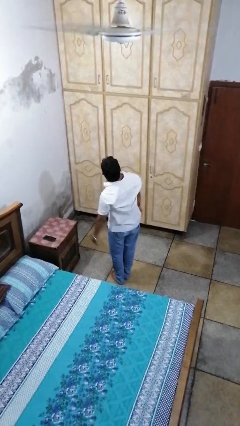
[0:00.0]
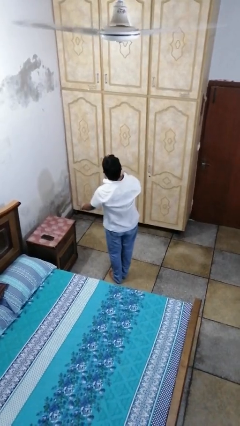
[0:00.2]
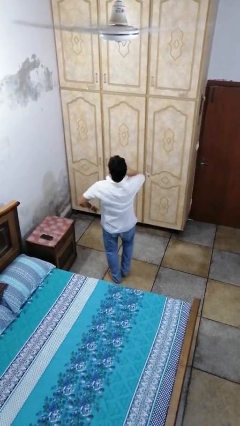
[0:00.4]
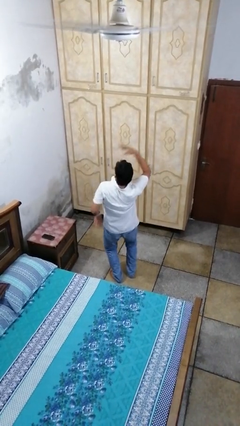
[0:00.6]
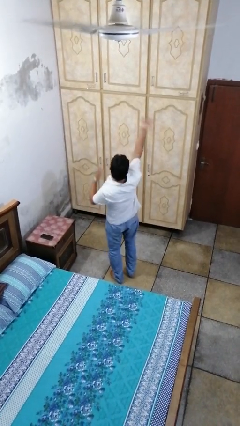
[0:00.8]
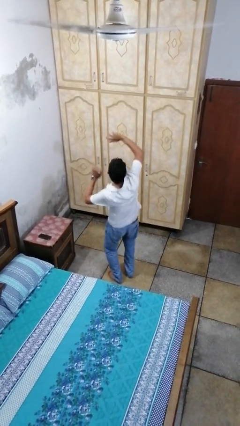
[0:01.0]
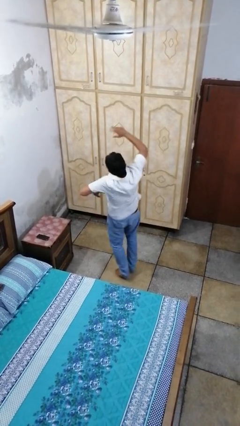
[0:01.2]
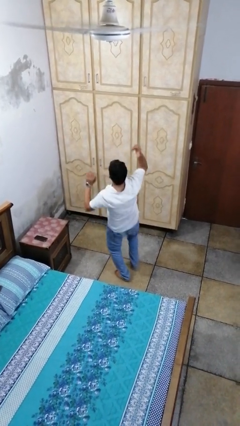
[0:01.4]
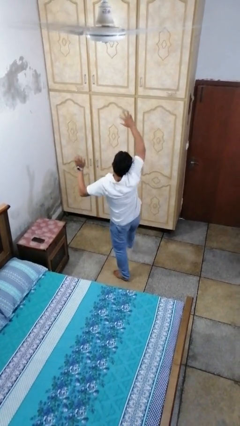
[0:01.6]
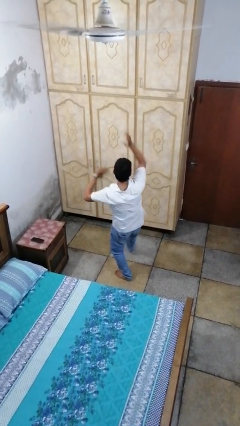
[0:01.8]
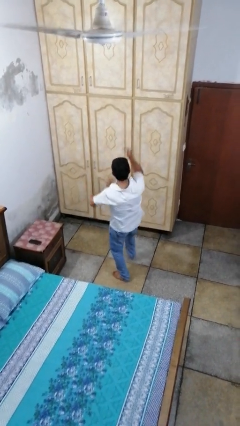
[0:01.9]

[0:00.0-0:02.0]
person dances in place

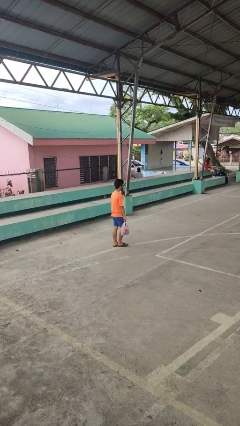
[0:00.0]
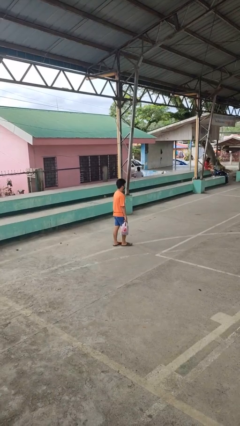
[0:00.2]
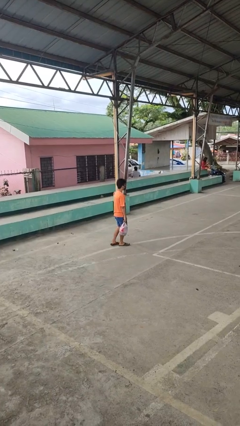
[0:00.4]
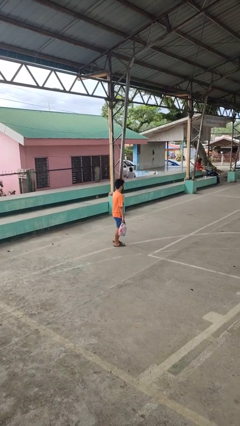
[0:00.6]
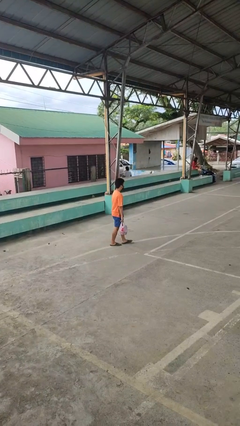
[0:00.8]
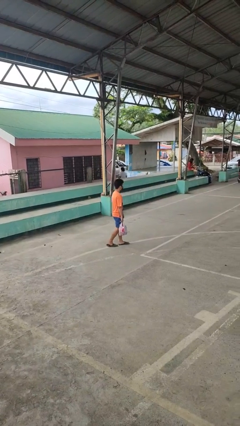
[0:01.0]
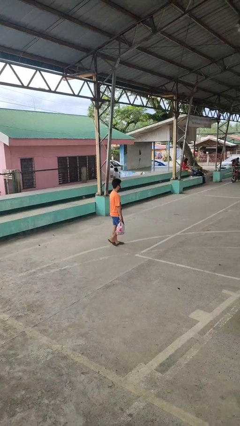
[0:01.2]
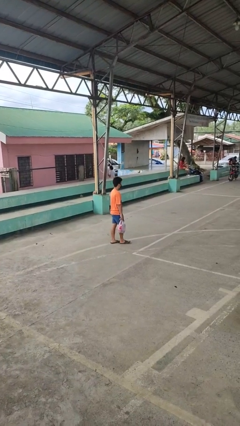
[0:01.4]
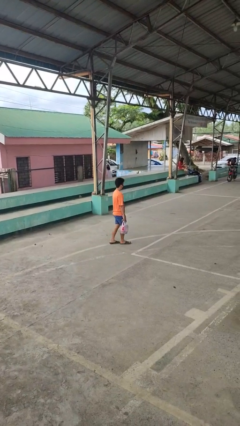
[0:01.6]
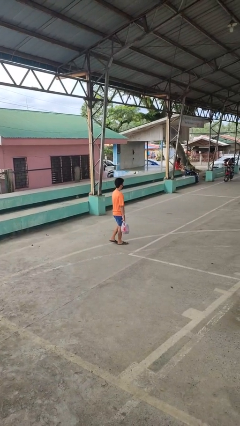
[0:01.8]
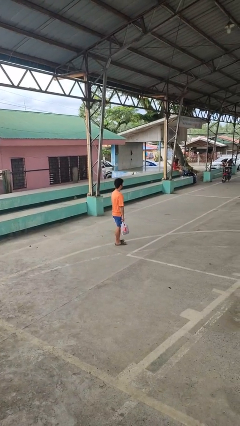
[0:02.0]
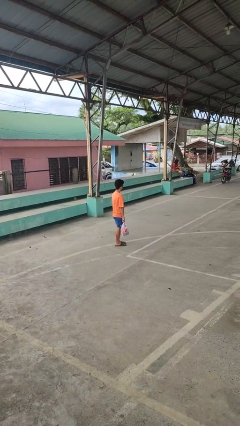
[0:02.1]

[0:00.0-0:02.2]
person carries groceries

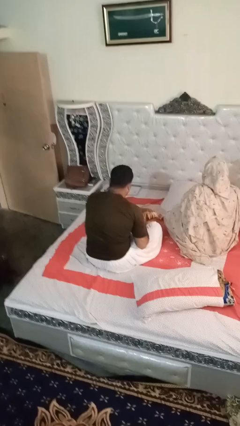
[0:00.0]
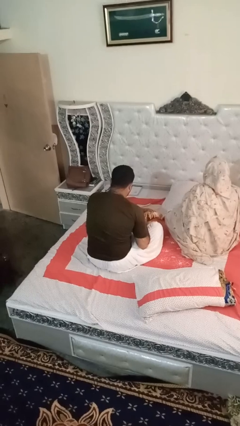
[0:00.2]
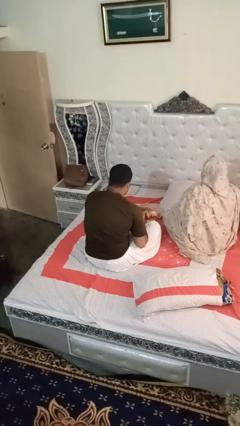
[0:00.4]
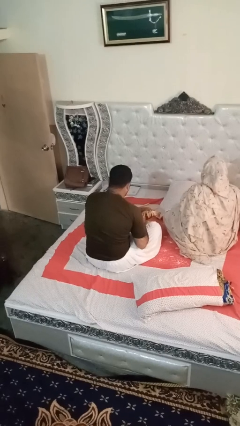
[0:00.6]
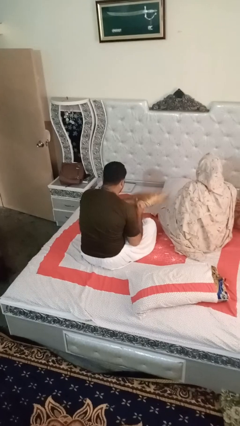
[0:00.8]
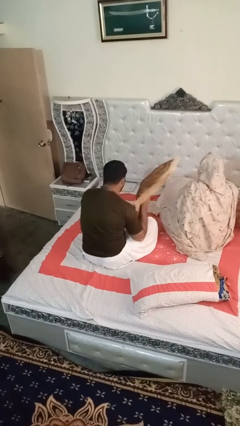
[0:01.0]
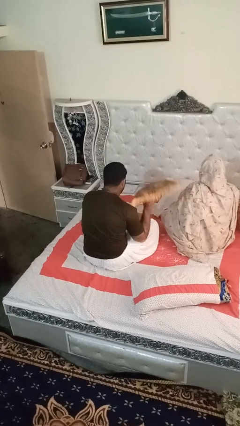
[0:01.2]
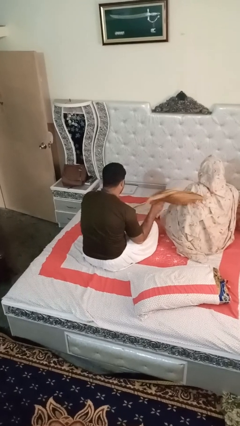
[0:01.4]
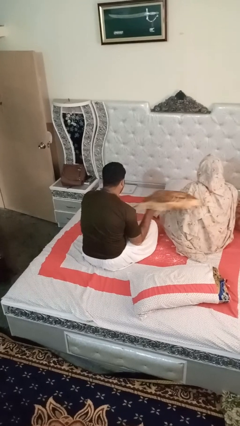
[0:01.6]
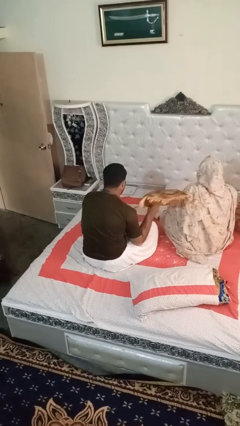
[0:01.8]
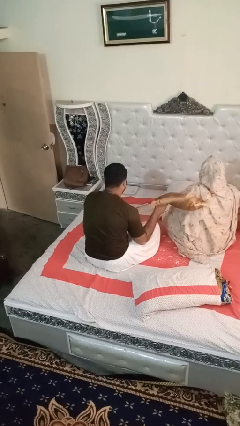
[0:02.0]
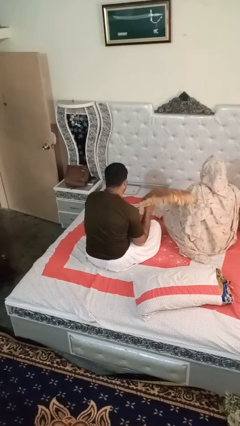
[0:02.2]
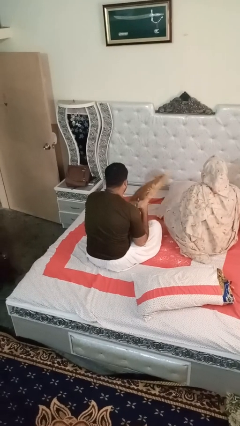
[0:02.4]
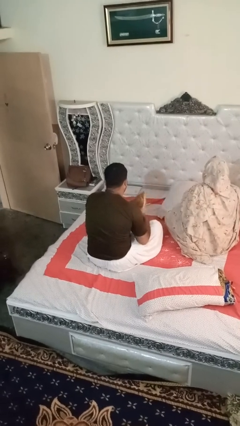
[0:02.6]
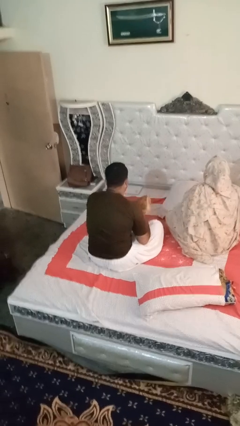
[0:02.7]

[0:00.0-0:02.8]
person hits person with pillow

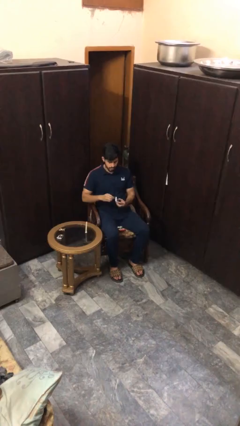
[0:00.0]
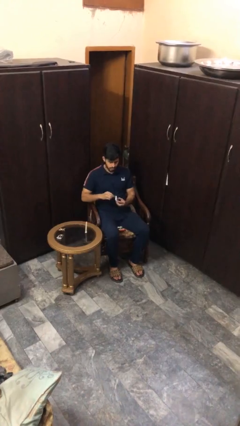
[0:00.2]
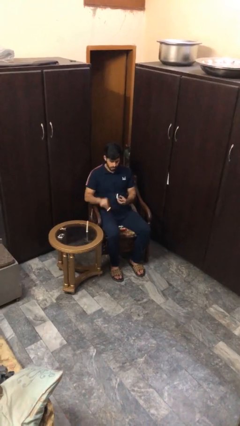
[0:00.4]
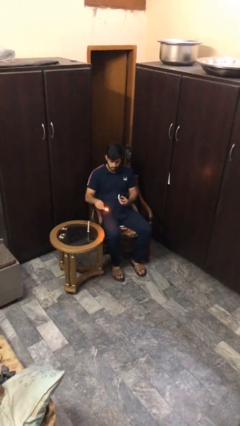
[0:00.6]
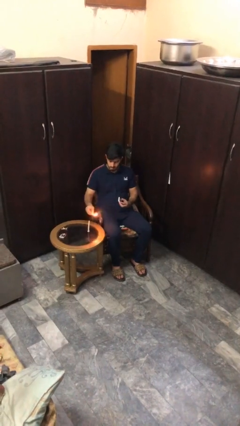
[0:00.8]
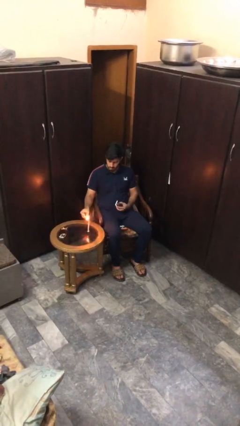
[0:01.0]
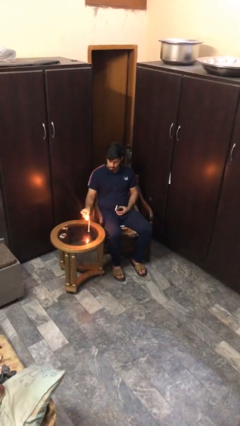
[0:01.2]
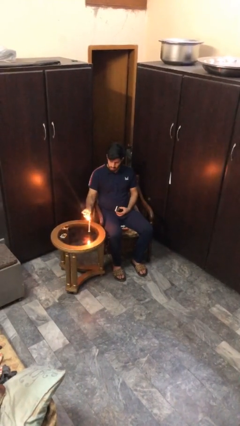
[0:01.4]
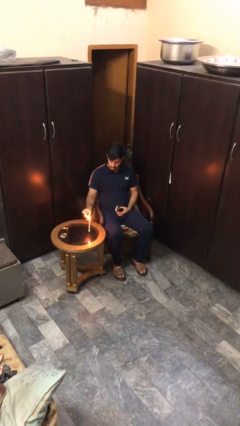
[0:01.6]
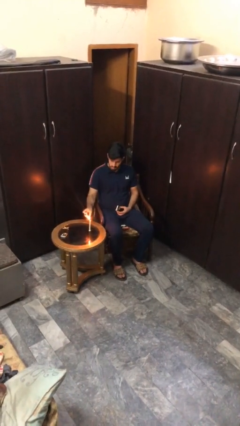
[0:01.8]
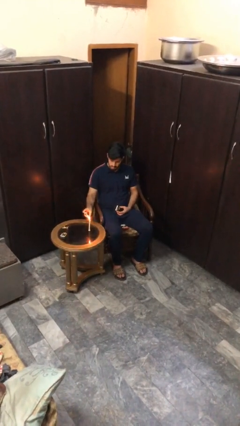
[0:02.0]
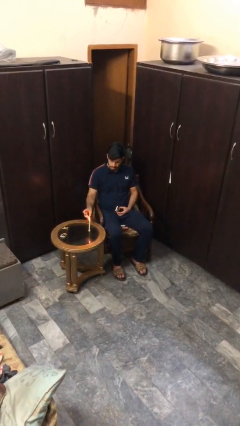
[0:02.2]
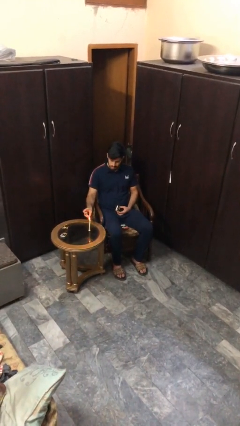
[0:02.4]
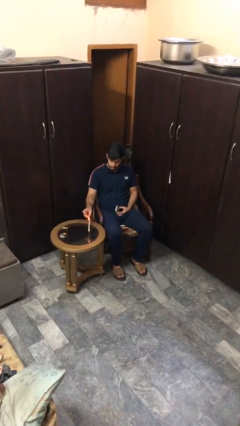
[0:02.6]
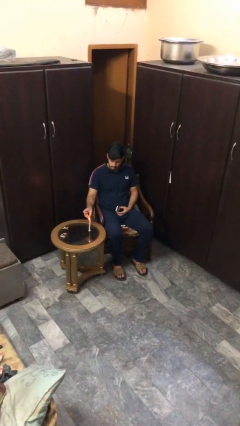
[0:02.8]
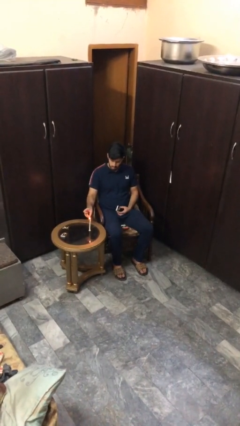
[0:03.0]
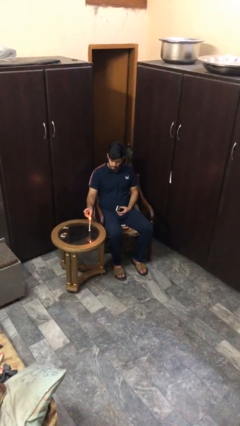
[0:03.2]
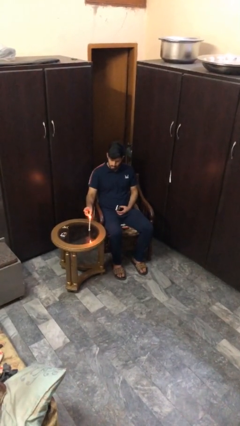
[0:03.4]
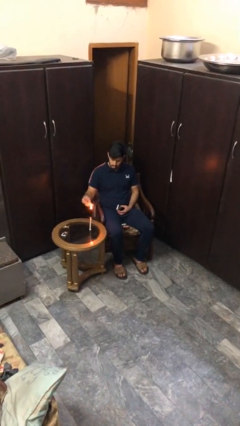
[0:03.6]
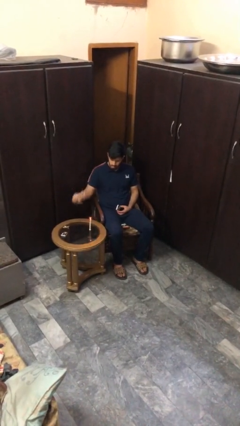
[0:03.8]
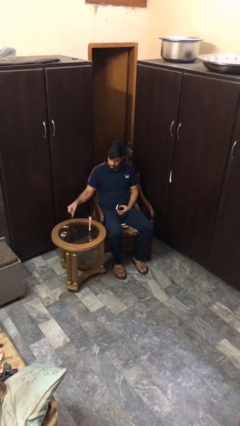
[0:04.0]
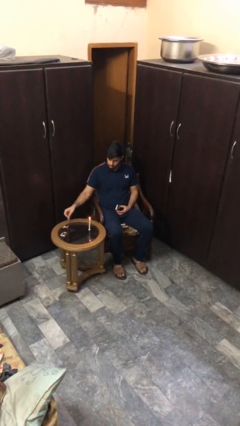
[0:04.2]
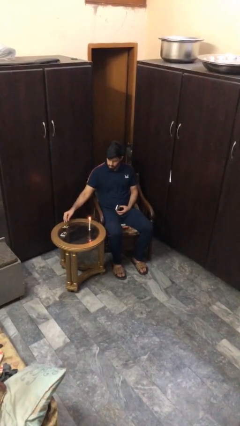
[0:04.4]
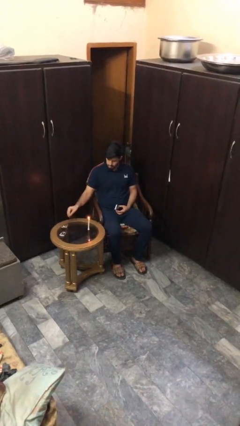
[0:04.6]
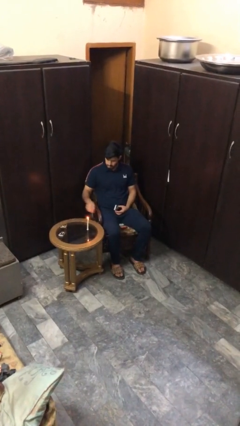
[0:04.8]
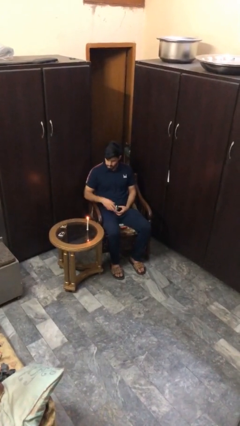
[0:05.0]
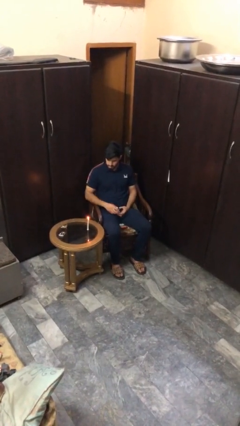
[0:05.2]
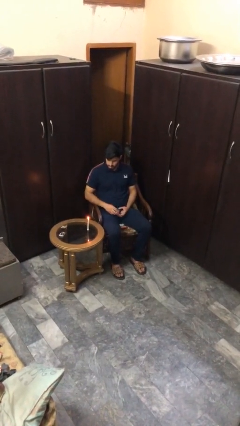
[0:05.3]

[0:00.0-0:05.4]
person lights candle

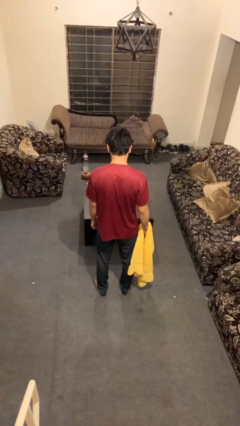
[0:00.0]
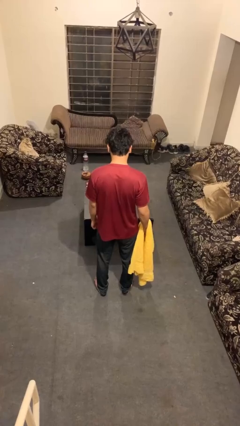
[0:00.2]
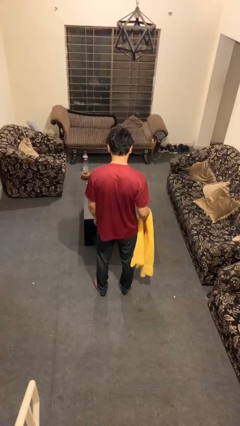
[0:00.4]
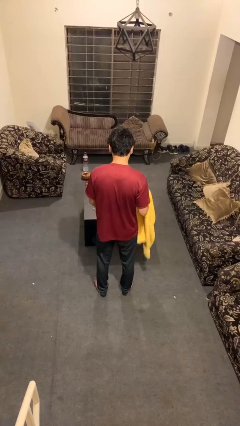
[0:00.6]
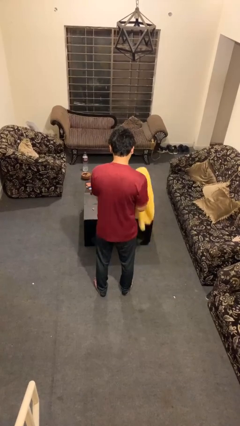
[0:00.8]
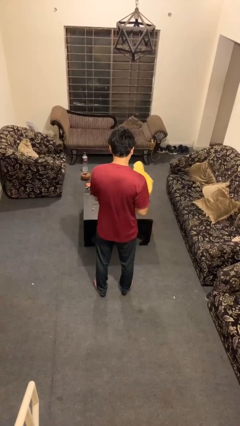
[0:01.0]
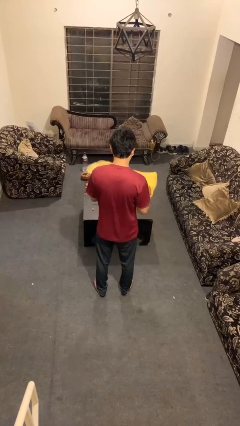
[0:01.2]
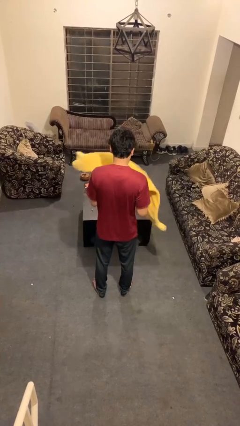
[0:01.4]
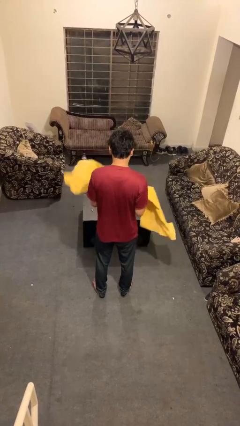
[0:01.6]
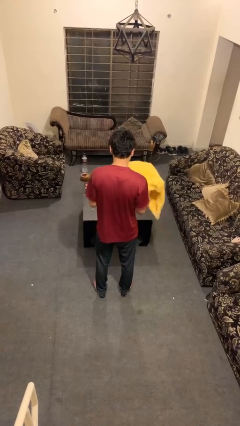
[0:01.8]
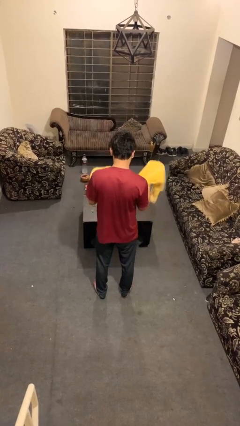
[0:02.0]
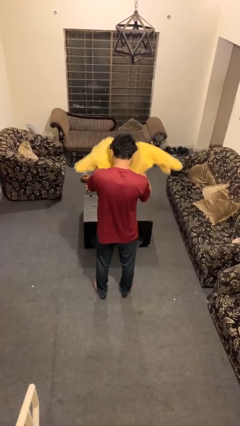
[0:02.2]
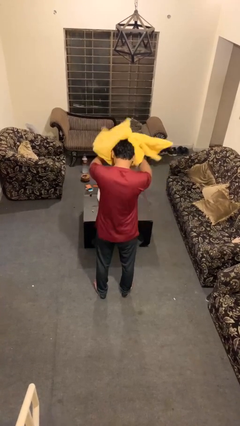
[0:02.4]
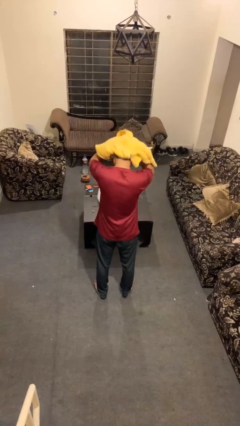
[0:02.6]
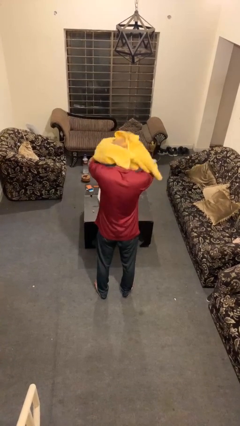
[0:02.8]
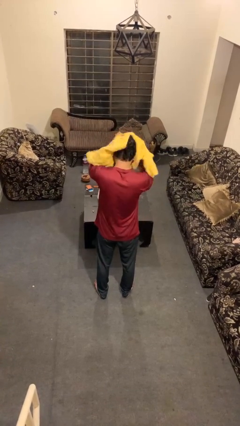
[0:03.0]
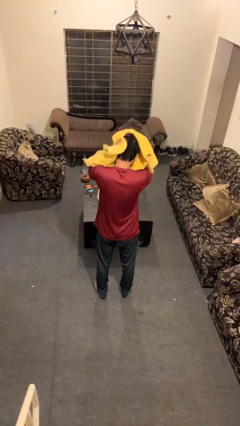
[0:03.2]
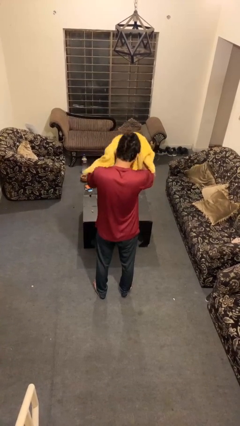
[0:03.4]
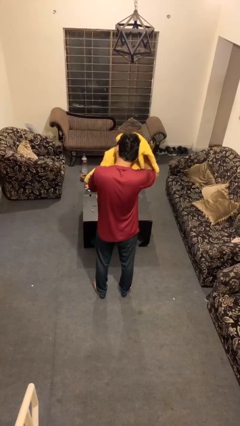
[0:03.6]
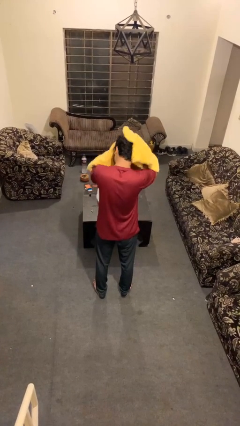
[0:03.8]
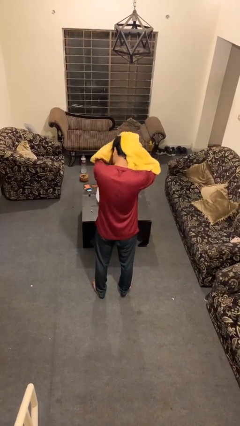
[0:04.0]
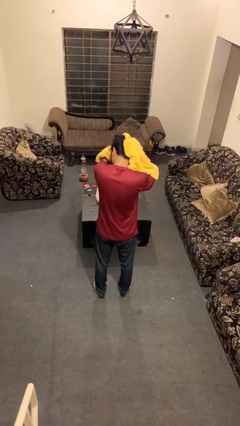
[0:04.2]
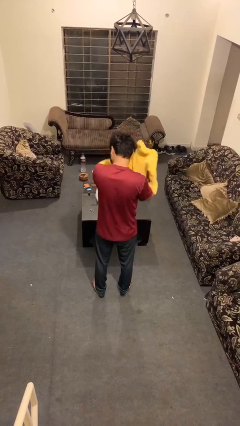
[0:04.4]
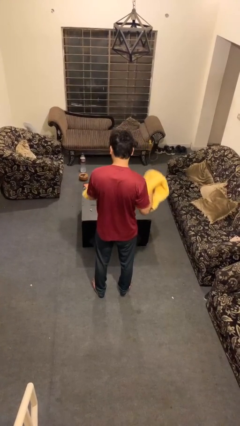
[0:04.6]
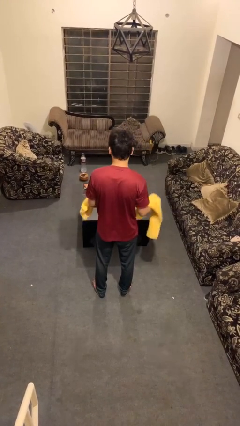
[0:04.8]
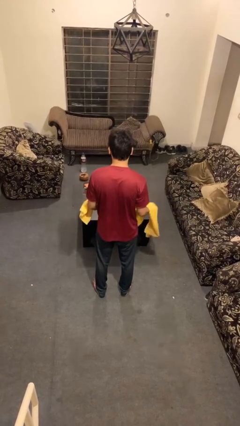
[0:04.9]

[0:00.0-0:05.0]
person dries hair with towel

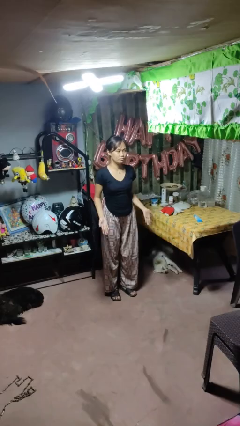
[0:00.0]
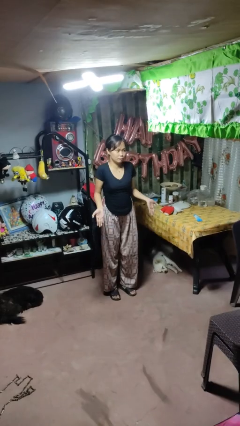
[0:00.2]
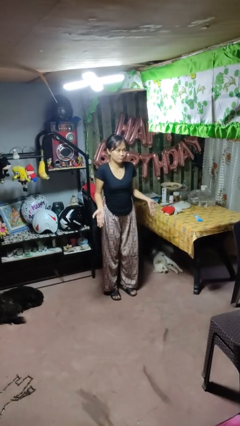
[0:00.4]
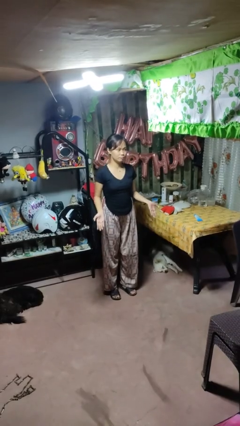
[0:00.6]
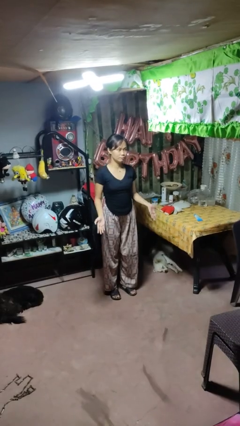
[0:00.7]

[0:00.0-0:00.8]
person shrugs
